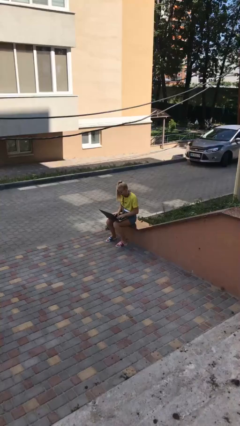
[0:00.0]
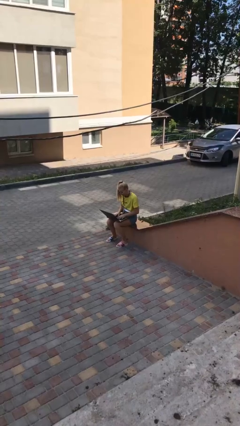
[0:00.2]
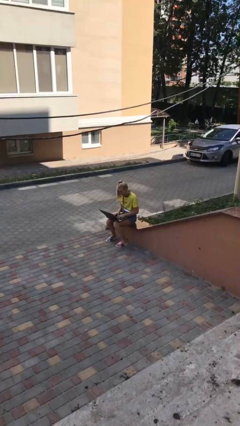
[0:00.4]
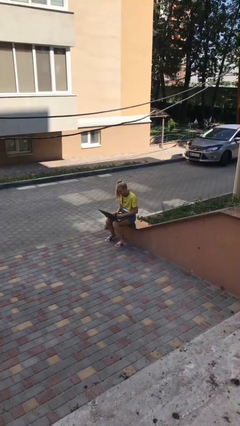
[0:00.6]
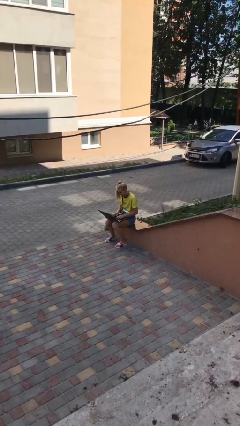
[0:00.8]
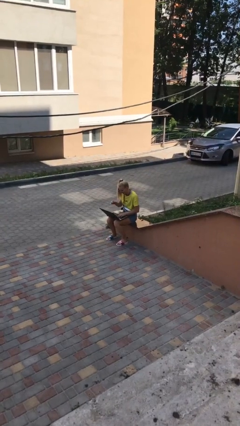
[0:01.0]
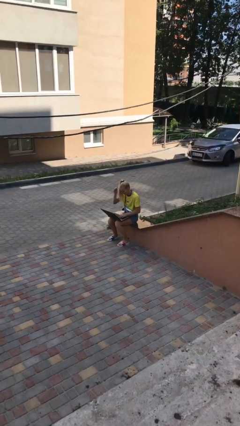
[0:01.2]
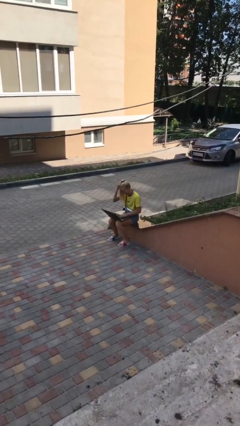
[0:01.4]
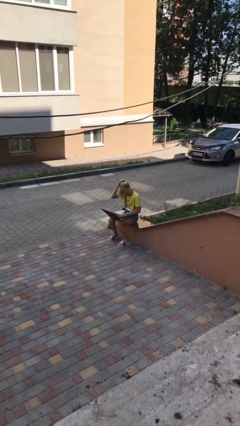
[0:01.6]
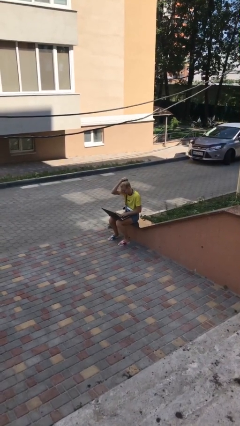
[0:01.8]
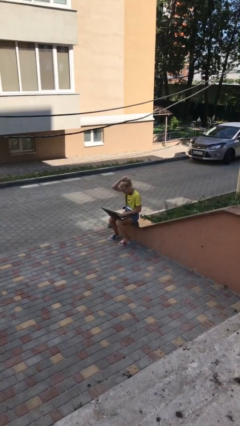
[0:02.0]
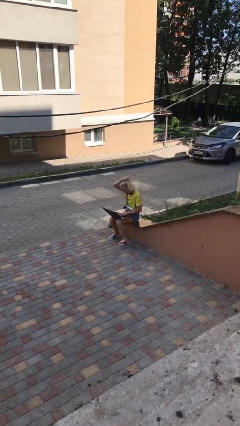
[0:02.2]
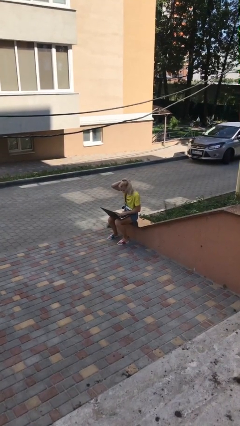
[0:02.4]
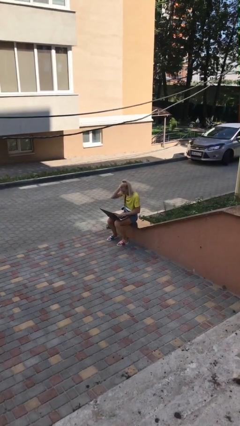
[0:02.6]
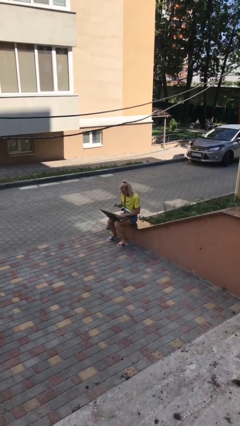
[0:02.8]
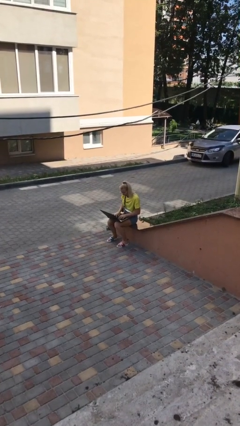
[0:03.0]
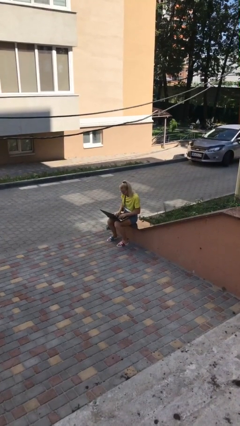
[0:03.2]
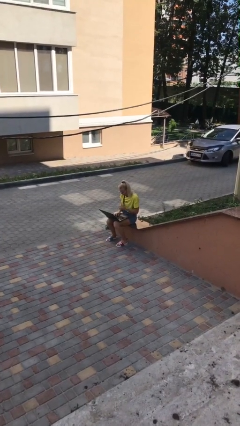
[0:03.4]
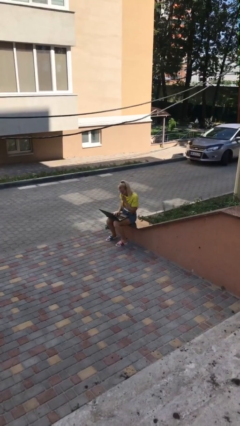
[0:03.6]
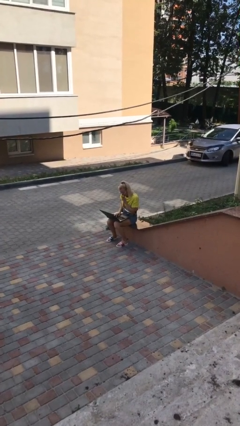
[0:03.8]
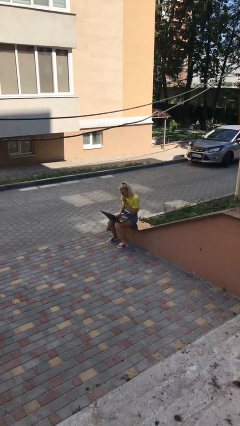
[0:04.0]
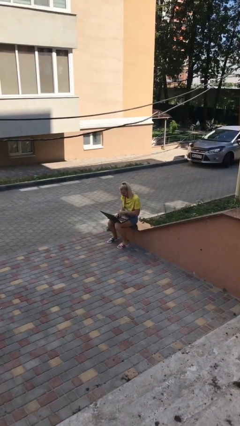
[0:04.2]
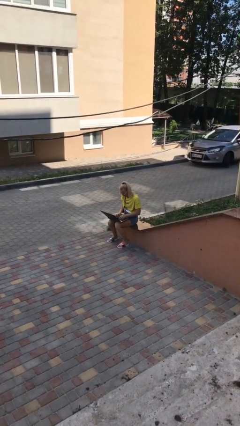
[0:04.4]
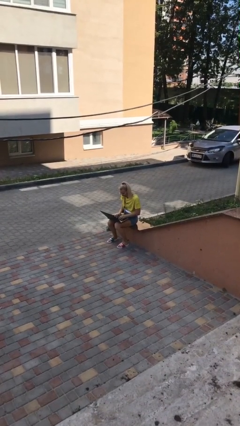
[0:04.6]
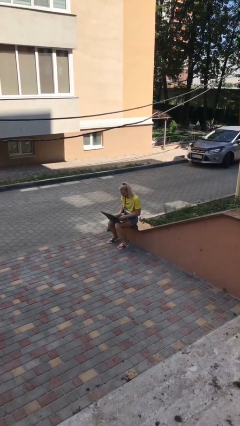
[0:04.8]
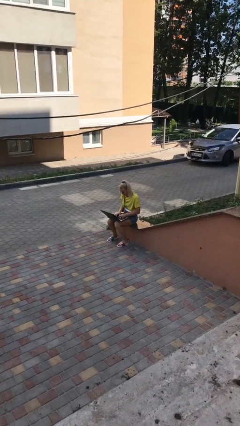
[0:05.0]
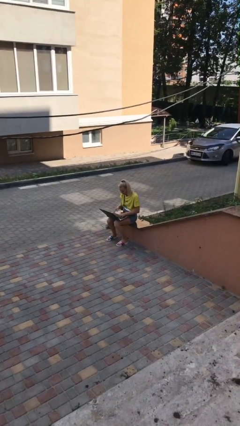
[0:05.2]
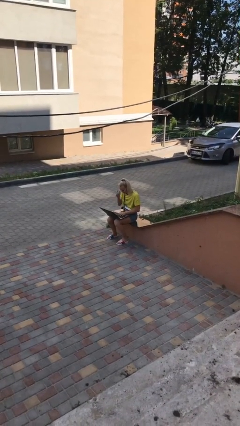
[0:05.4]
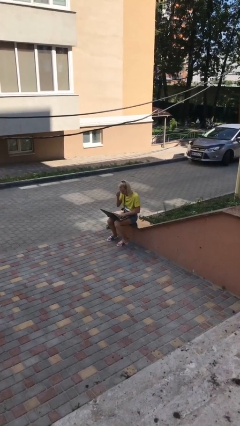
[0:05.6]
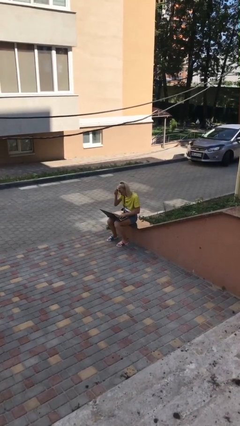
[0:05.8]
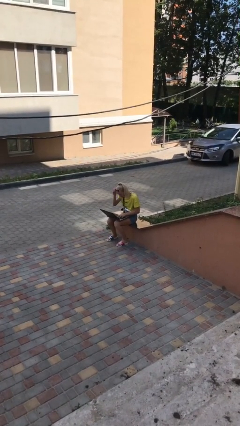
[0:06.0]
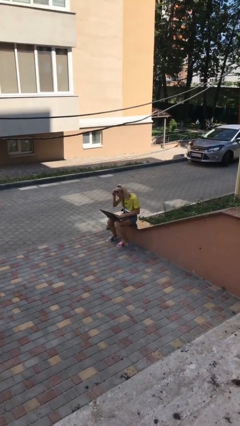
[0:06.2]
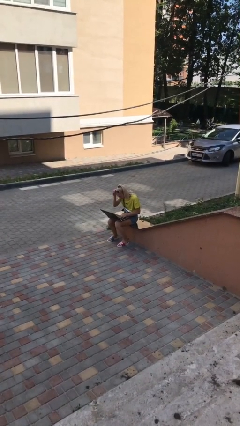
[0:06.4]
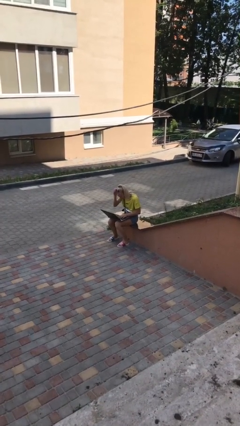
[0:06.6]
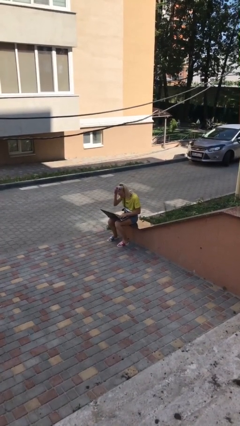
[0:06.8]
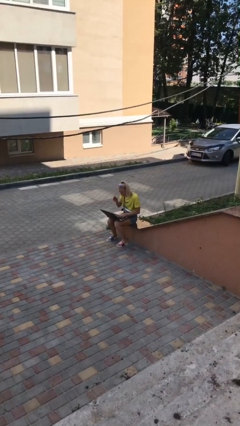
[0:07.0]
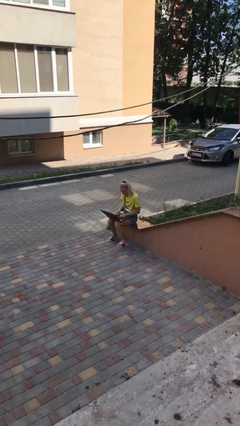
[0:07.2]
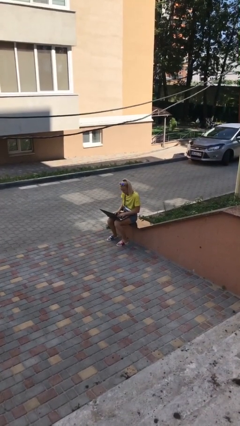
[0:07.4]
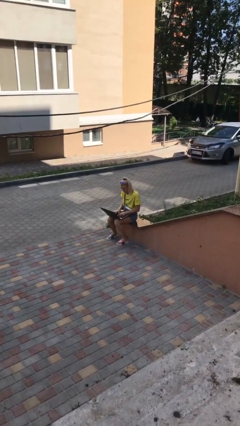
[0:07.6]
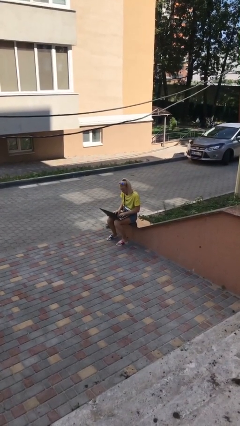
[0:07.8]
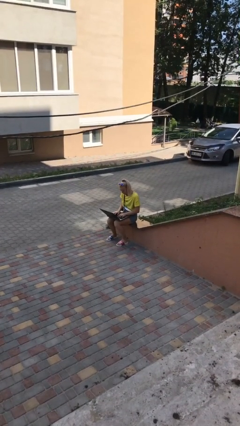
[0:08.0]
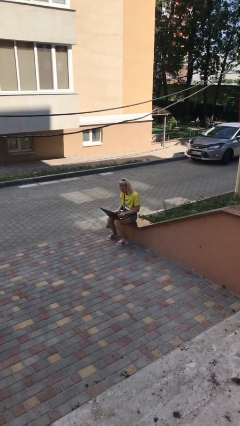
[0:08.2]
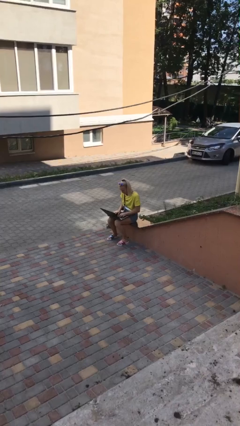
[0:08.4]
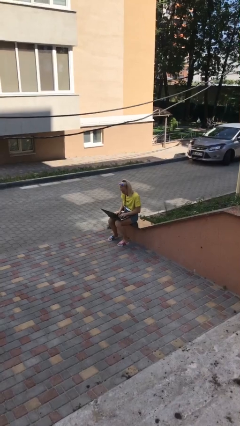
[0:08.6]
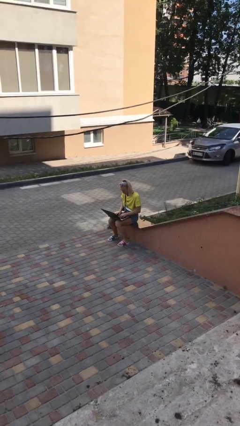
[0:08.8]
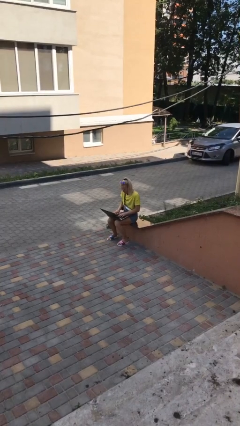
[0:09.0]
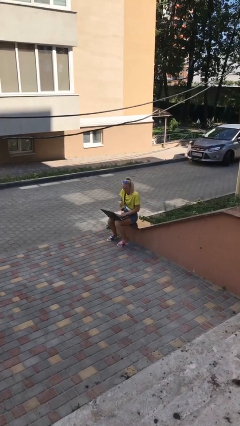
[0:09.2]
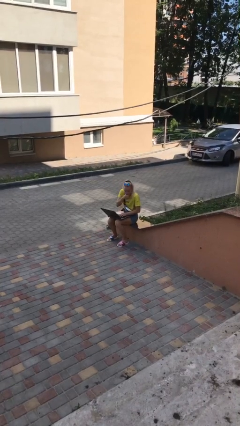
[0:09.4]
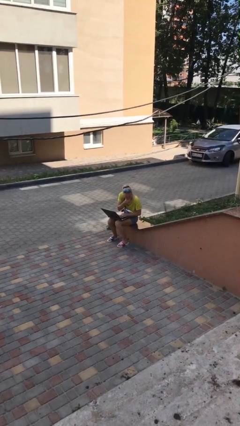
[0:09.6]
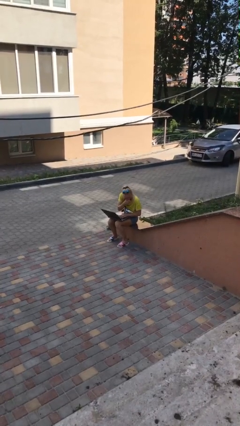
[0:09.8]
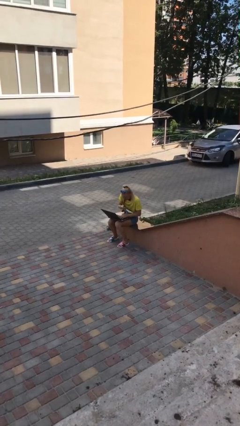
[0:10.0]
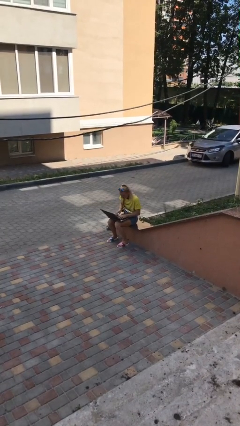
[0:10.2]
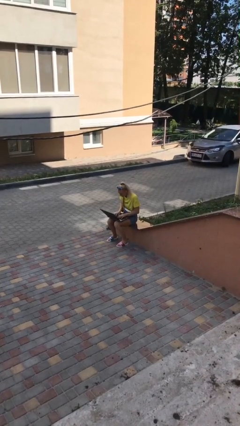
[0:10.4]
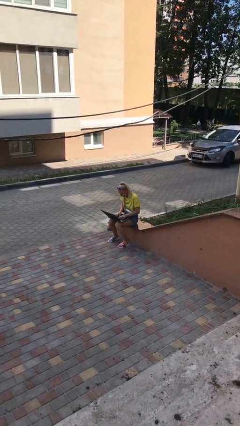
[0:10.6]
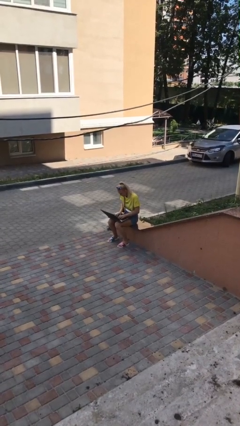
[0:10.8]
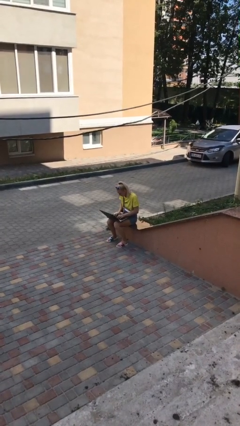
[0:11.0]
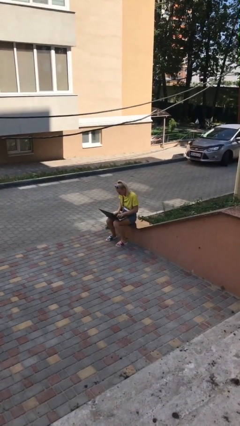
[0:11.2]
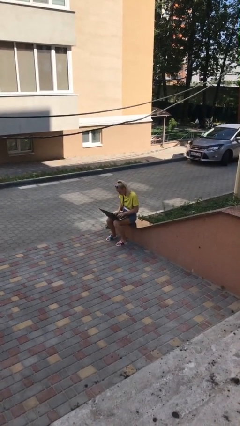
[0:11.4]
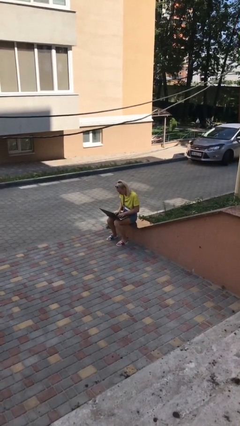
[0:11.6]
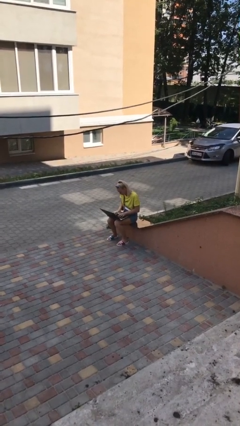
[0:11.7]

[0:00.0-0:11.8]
person interacts with laptop

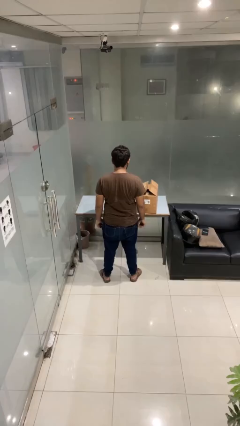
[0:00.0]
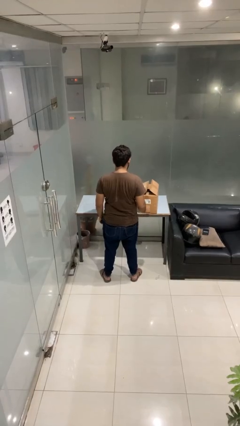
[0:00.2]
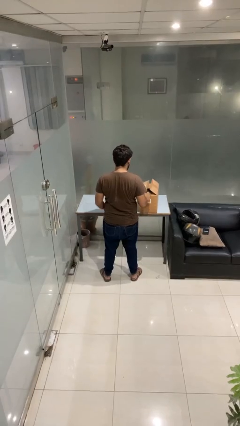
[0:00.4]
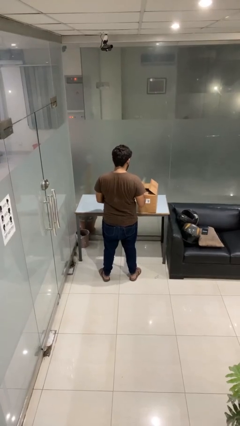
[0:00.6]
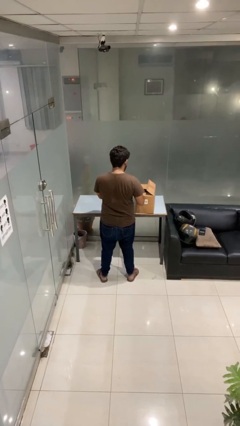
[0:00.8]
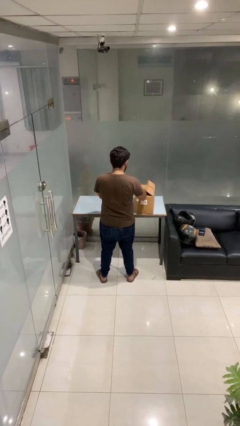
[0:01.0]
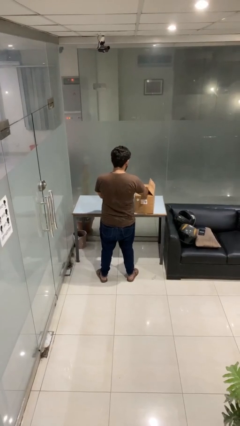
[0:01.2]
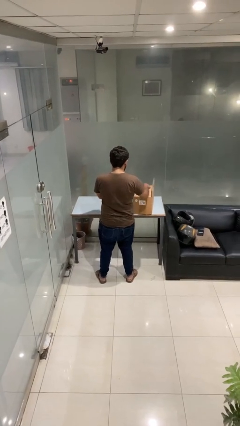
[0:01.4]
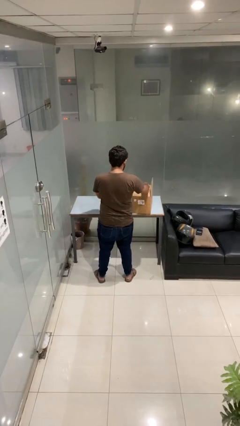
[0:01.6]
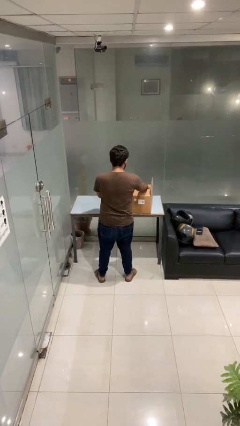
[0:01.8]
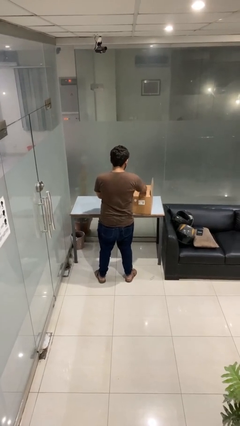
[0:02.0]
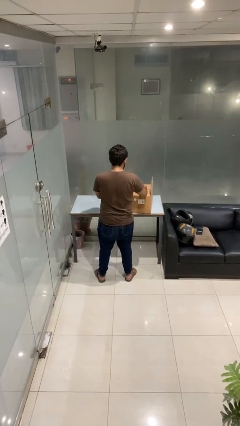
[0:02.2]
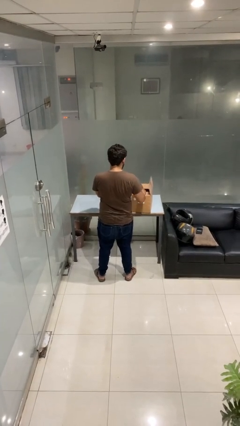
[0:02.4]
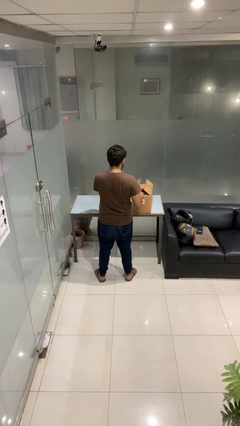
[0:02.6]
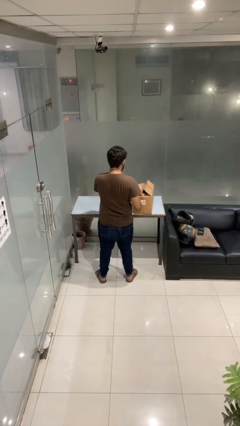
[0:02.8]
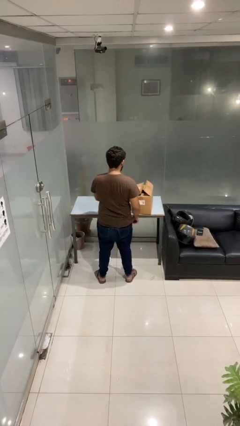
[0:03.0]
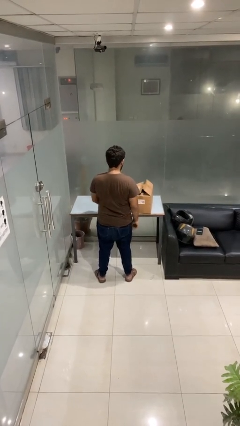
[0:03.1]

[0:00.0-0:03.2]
person searches in box

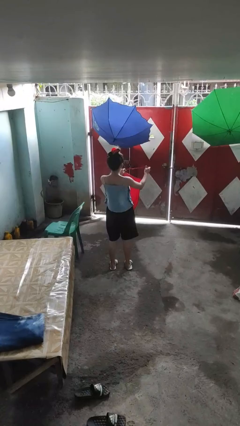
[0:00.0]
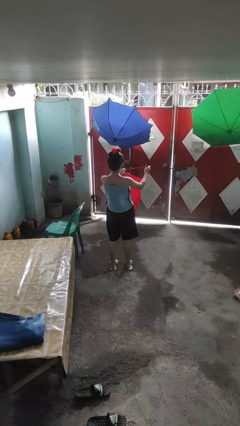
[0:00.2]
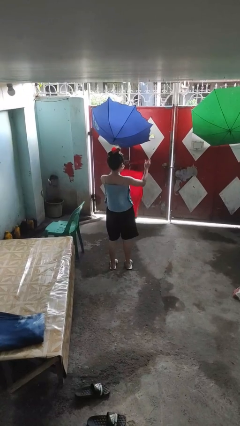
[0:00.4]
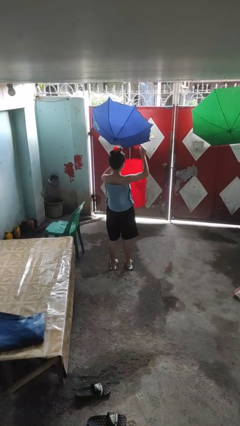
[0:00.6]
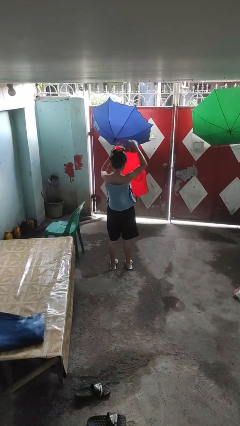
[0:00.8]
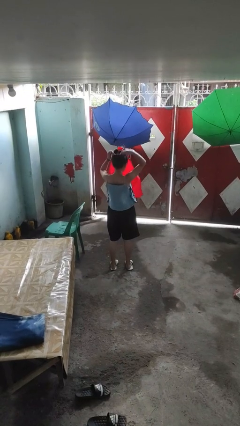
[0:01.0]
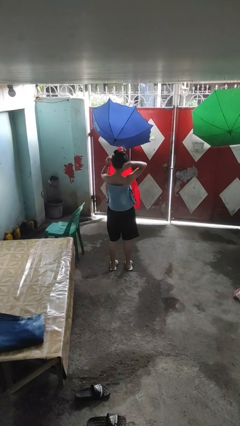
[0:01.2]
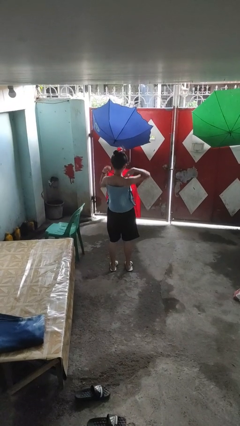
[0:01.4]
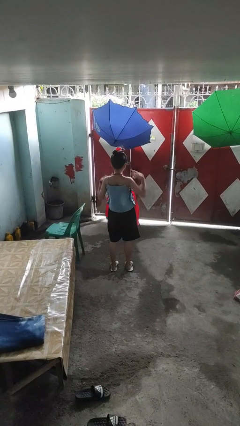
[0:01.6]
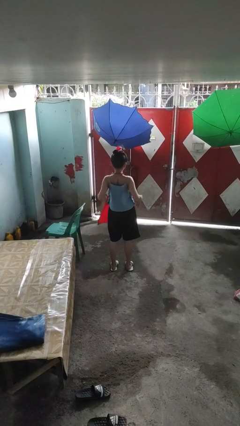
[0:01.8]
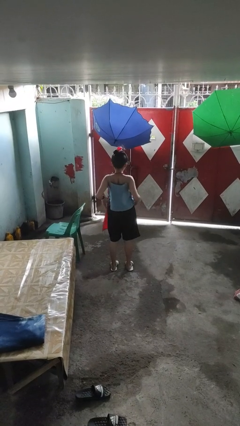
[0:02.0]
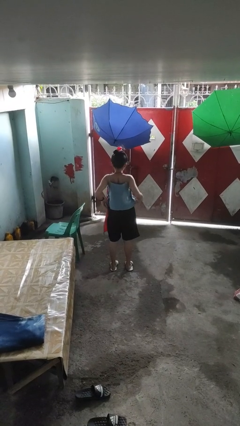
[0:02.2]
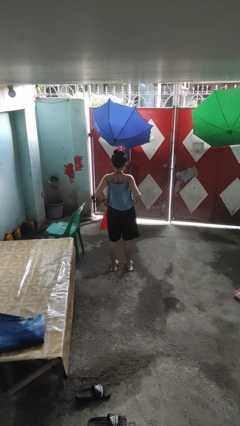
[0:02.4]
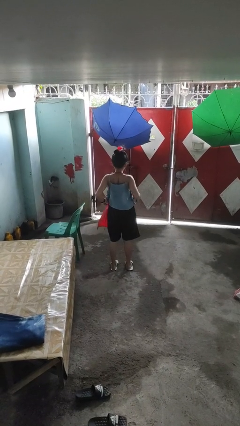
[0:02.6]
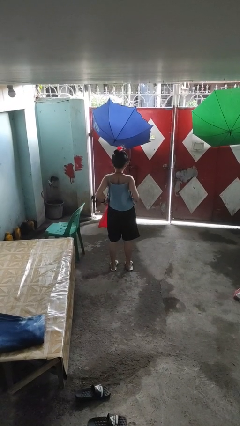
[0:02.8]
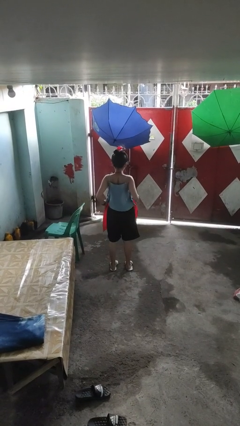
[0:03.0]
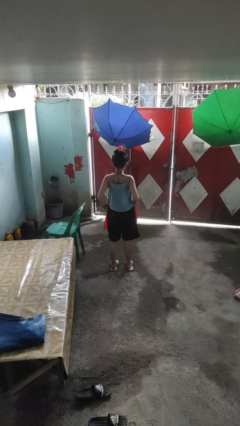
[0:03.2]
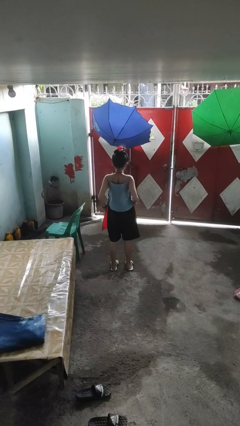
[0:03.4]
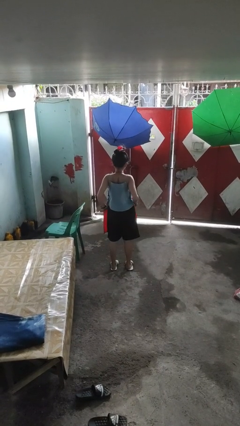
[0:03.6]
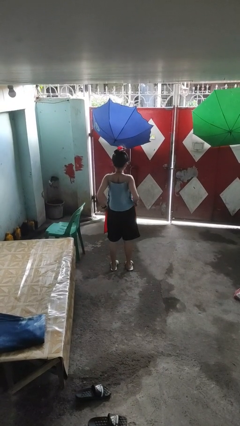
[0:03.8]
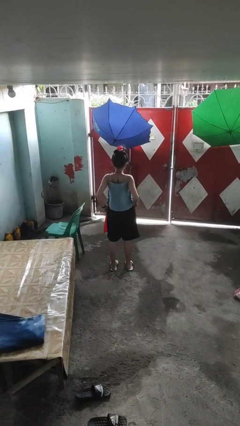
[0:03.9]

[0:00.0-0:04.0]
person puts on apron
